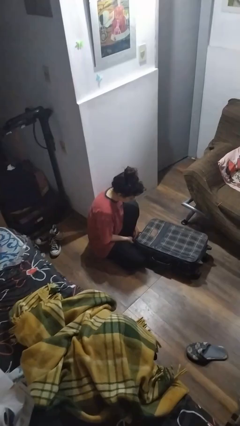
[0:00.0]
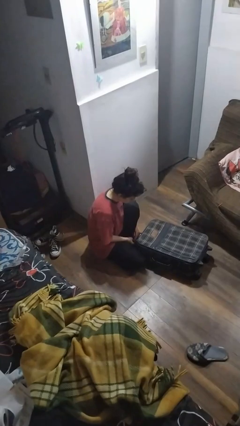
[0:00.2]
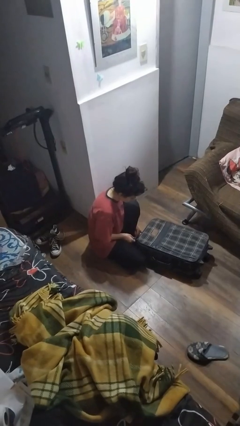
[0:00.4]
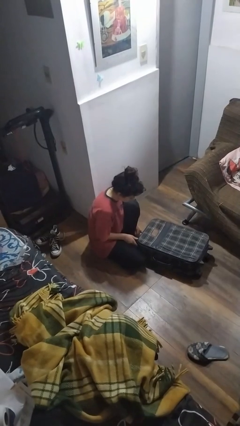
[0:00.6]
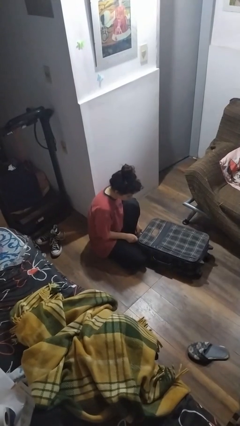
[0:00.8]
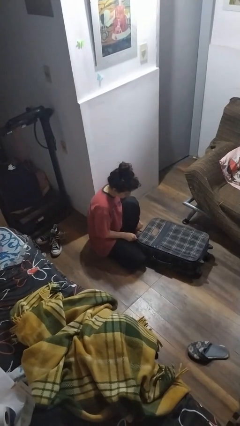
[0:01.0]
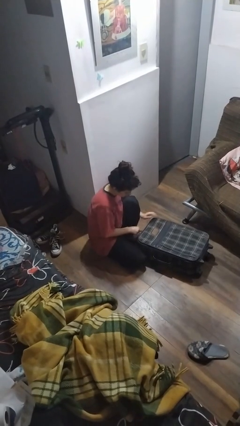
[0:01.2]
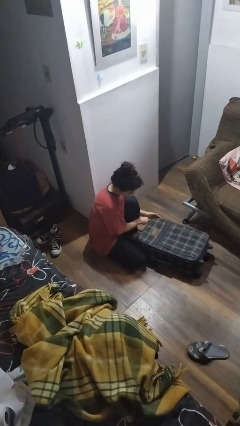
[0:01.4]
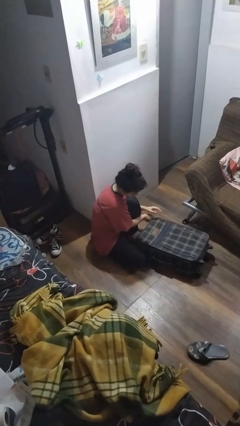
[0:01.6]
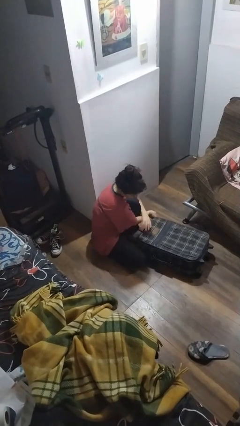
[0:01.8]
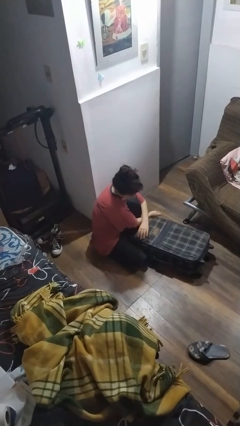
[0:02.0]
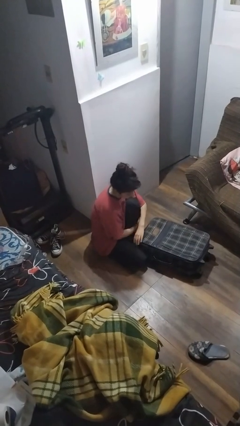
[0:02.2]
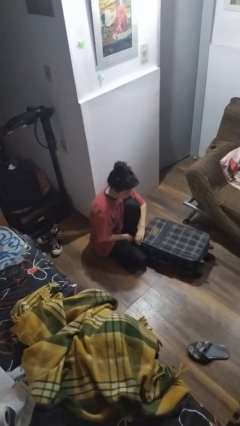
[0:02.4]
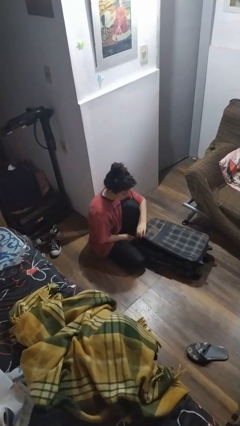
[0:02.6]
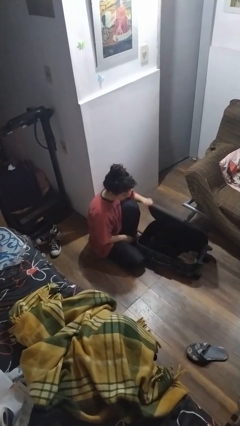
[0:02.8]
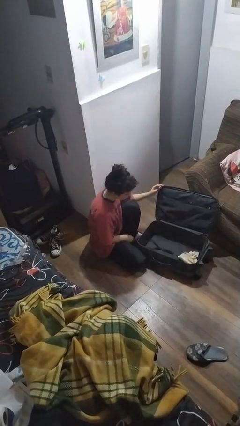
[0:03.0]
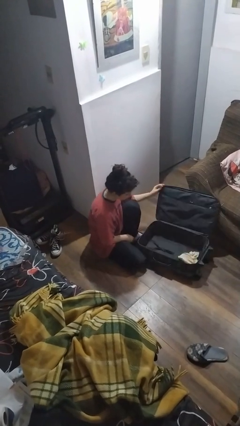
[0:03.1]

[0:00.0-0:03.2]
person opens suitcase

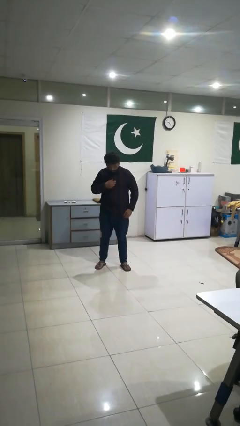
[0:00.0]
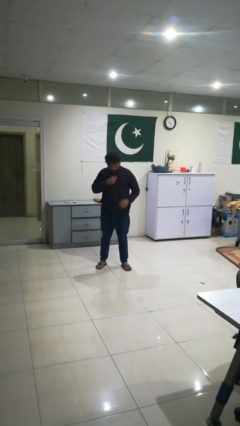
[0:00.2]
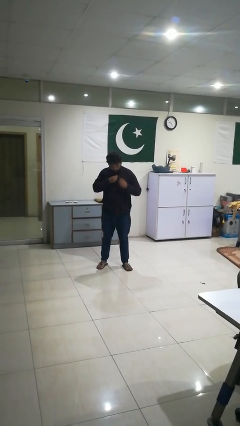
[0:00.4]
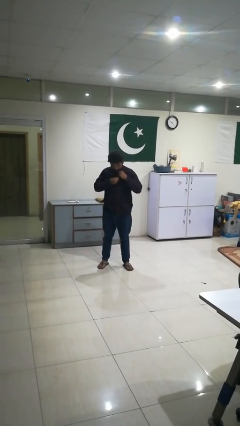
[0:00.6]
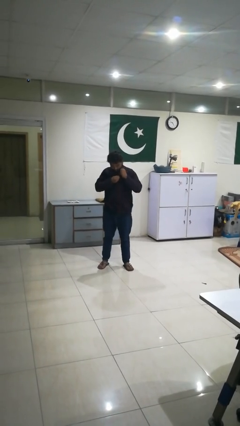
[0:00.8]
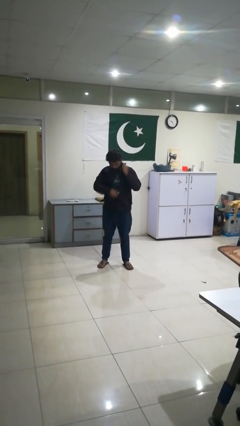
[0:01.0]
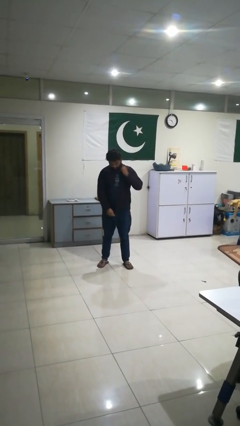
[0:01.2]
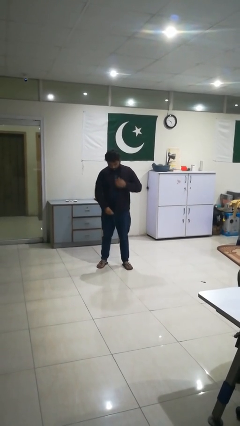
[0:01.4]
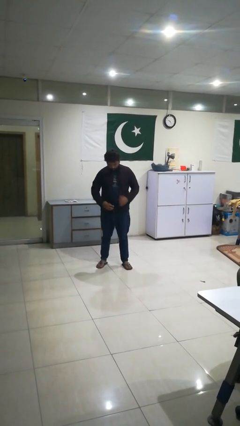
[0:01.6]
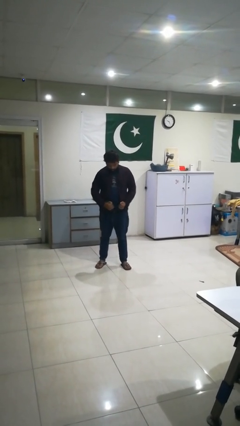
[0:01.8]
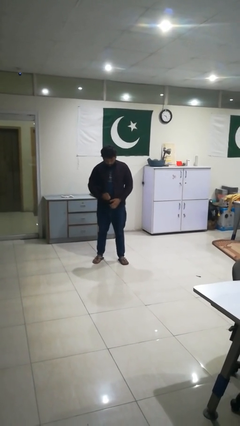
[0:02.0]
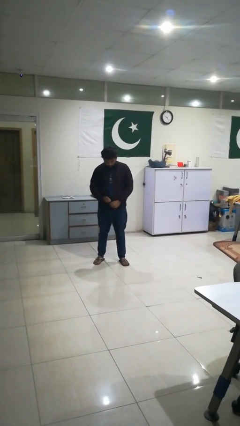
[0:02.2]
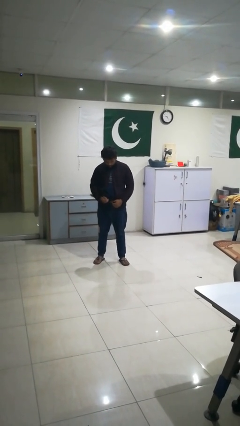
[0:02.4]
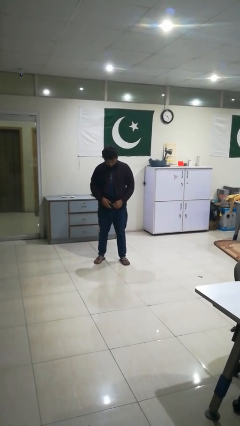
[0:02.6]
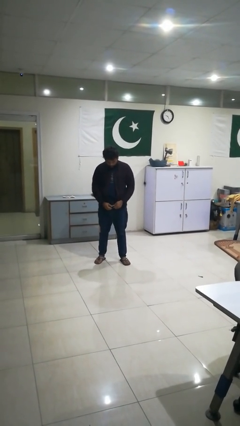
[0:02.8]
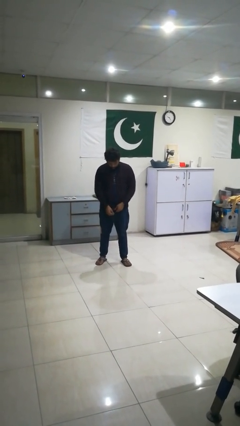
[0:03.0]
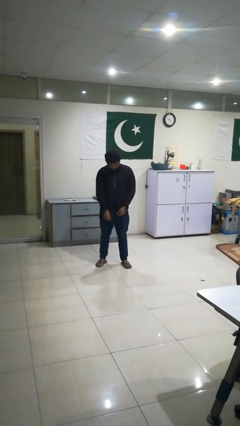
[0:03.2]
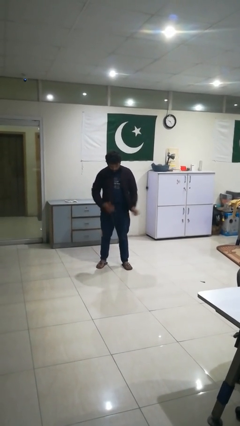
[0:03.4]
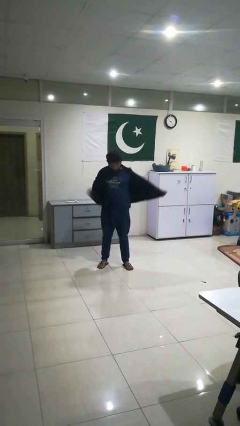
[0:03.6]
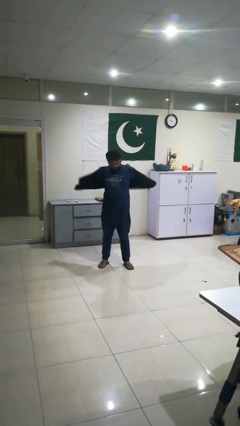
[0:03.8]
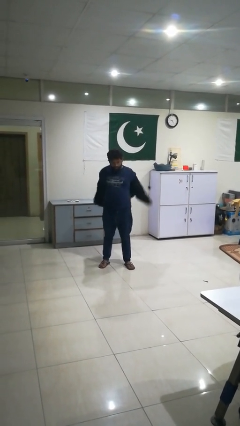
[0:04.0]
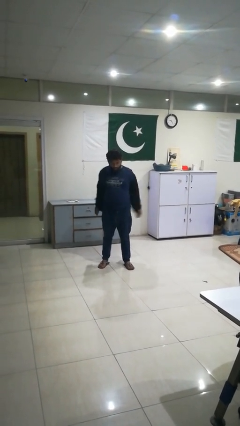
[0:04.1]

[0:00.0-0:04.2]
person unzips jacket

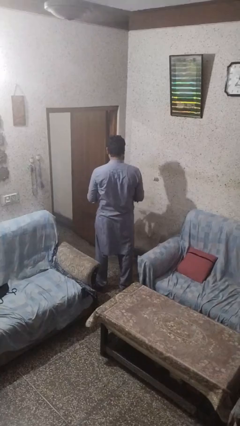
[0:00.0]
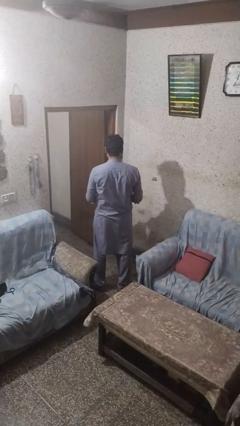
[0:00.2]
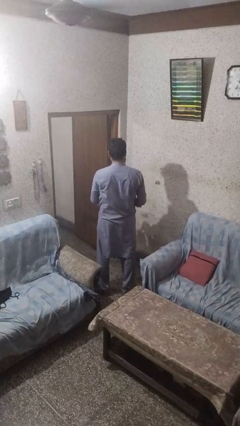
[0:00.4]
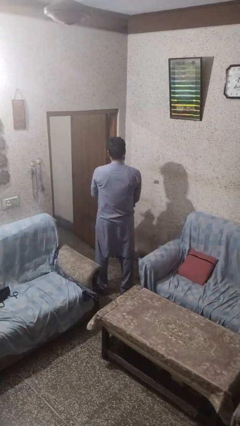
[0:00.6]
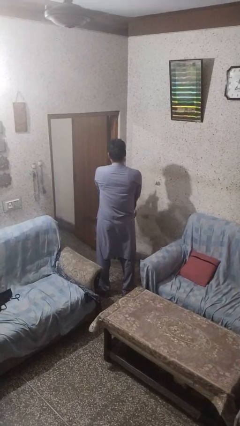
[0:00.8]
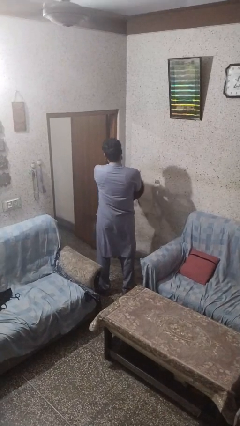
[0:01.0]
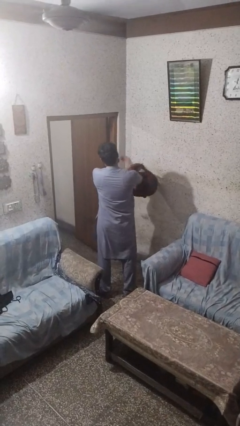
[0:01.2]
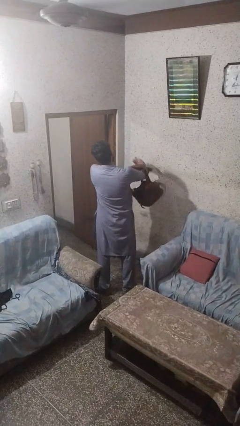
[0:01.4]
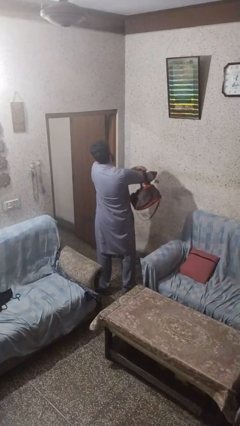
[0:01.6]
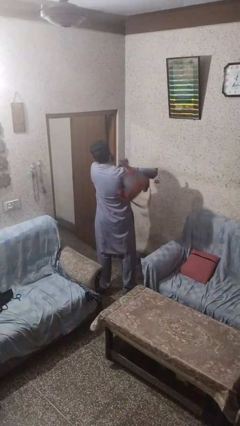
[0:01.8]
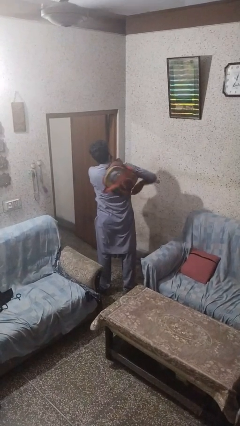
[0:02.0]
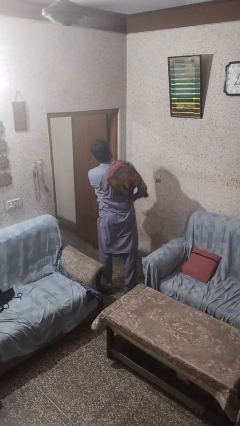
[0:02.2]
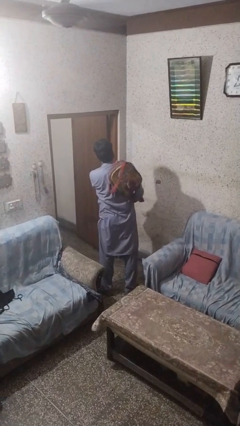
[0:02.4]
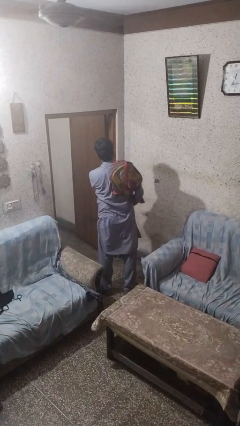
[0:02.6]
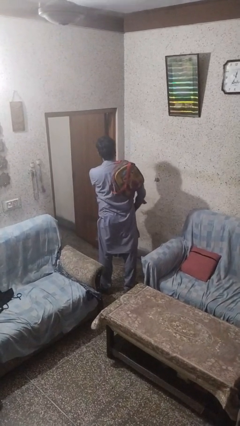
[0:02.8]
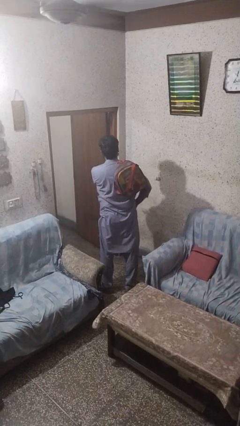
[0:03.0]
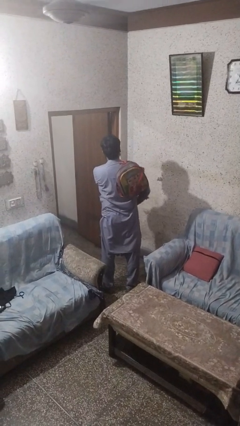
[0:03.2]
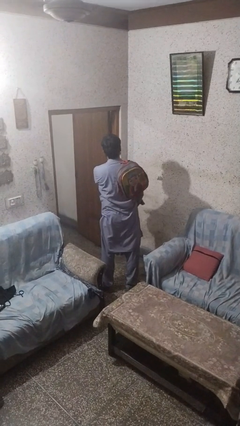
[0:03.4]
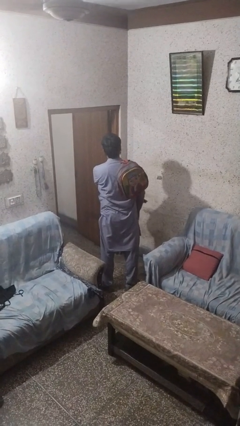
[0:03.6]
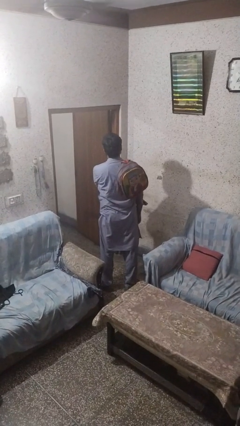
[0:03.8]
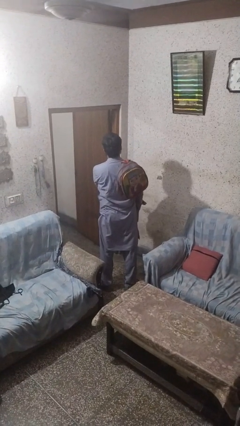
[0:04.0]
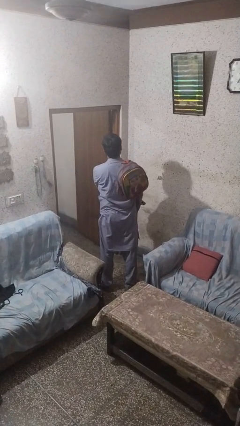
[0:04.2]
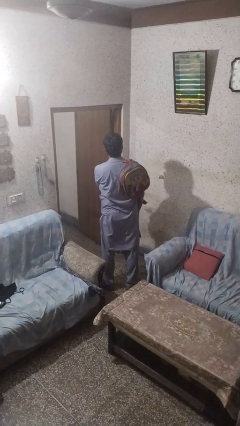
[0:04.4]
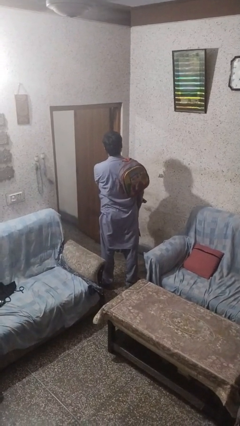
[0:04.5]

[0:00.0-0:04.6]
person puts on backpack

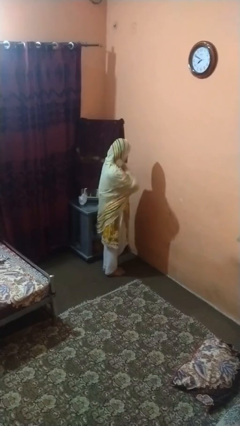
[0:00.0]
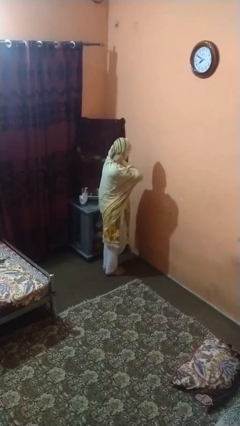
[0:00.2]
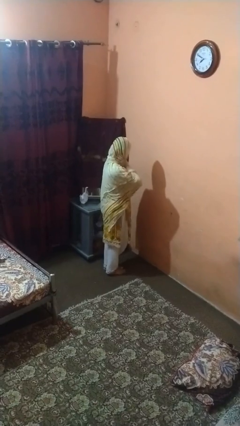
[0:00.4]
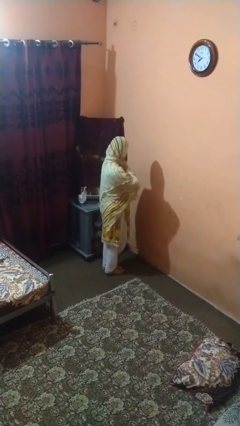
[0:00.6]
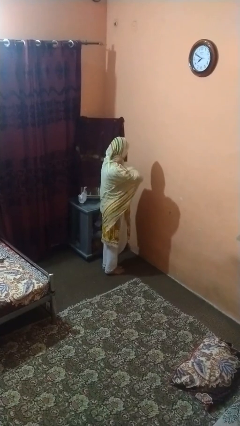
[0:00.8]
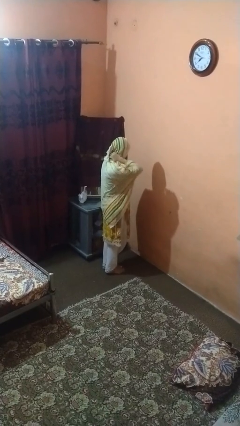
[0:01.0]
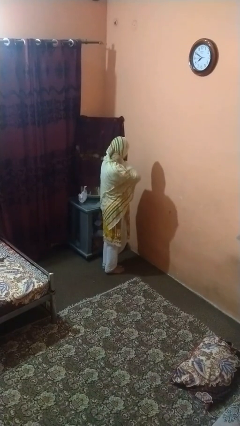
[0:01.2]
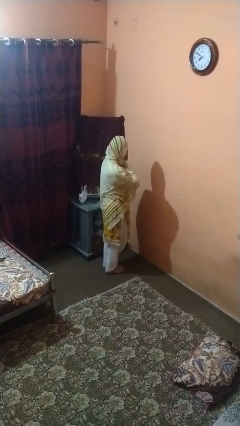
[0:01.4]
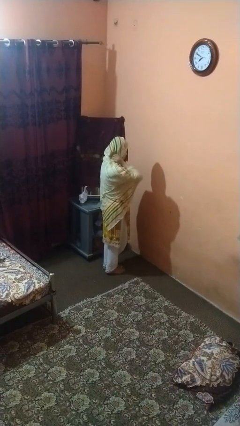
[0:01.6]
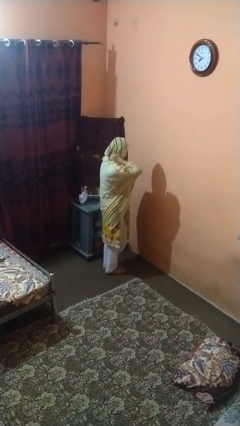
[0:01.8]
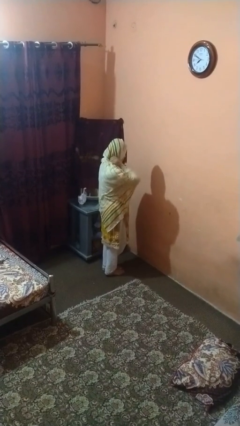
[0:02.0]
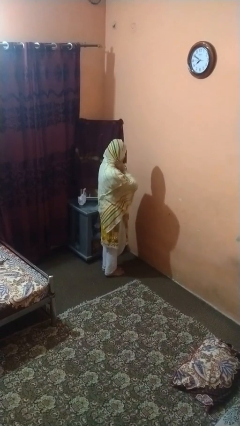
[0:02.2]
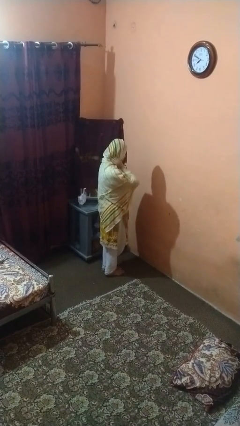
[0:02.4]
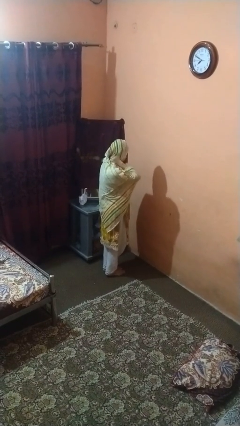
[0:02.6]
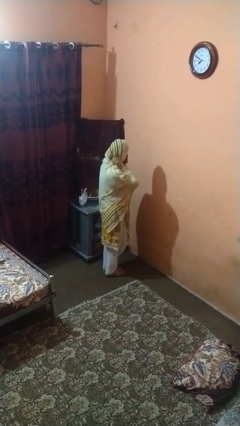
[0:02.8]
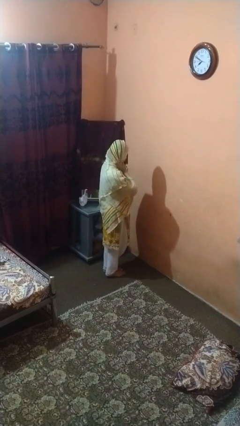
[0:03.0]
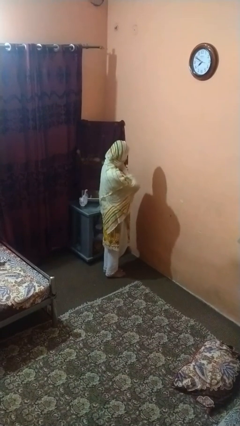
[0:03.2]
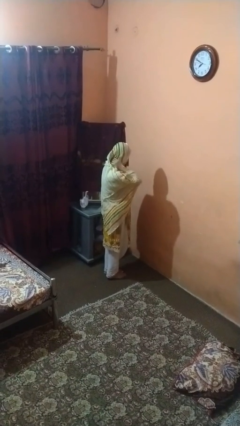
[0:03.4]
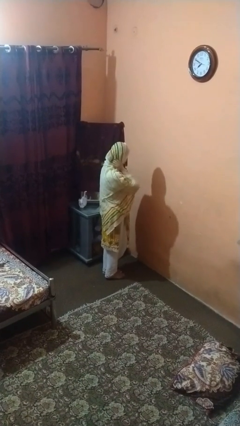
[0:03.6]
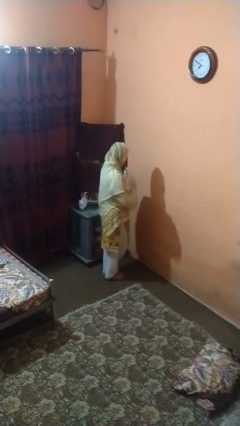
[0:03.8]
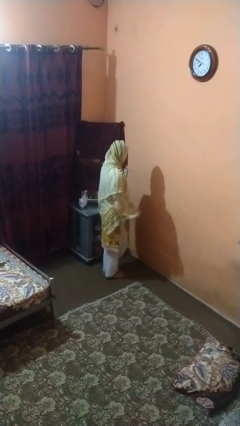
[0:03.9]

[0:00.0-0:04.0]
person rubs neck

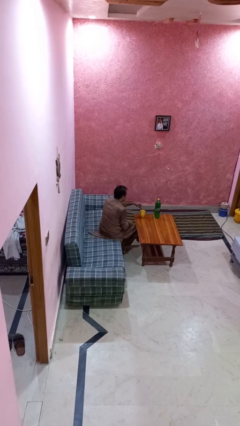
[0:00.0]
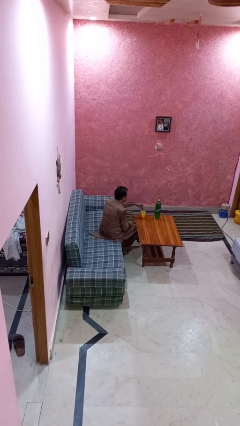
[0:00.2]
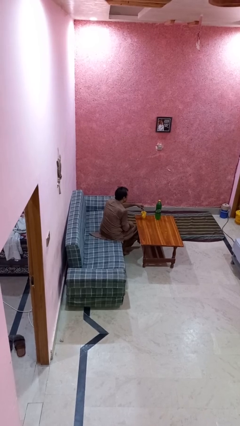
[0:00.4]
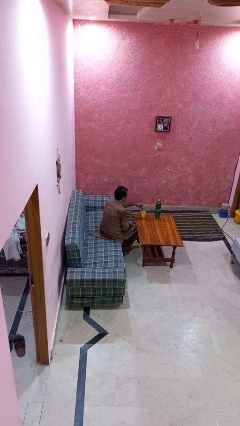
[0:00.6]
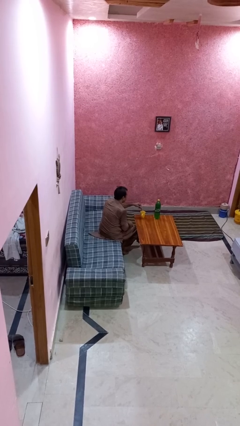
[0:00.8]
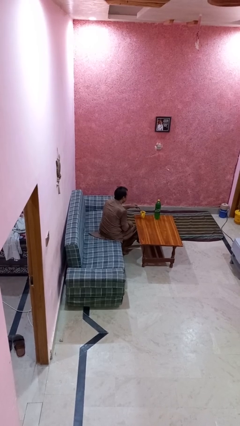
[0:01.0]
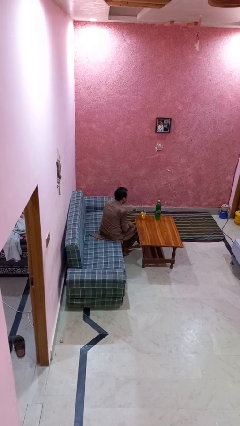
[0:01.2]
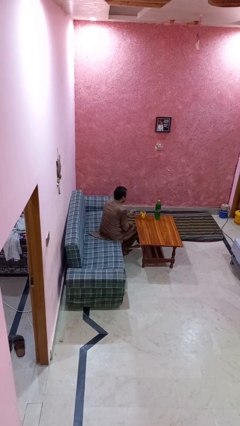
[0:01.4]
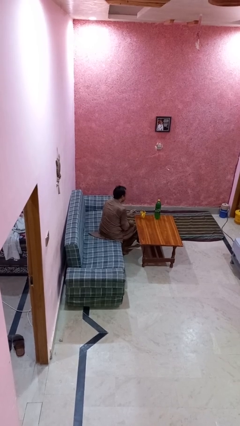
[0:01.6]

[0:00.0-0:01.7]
person stirs mug
